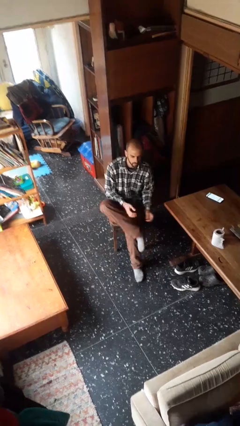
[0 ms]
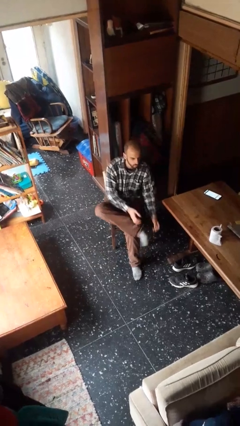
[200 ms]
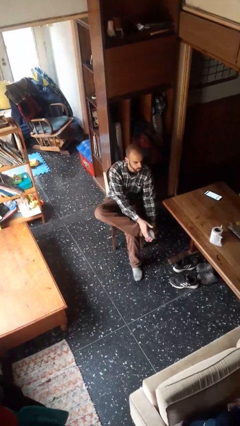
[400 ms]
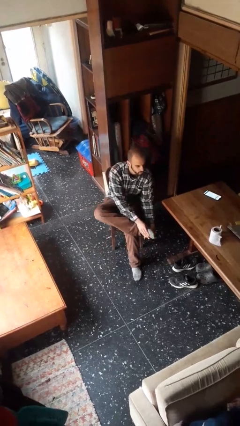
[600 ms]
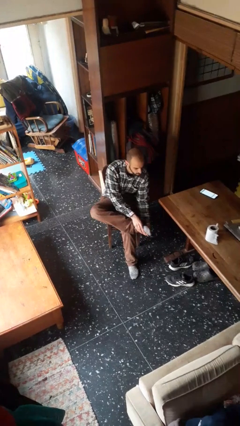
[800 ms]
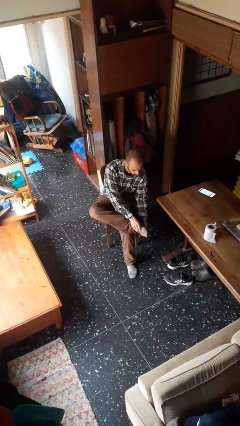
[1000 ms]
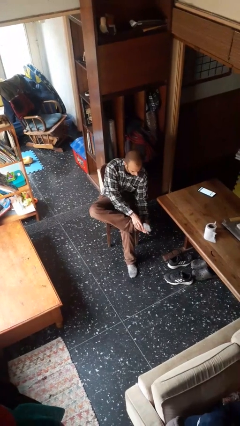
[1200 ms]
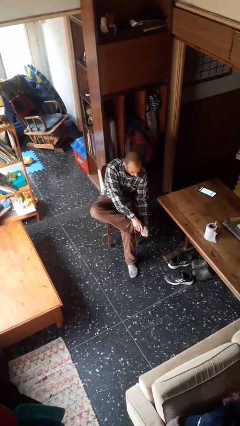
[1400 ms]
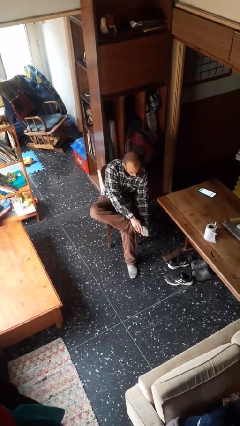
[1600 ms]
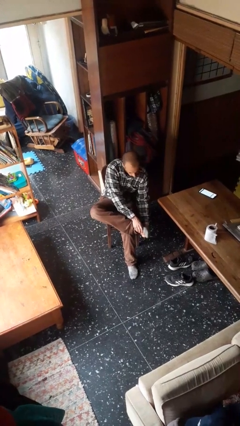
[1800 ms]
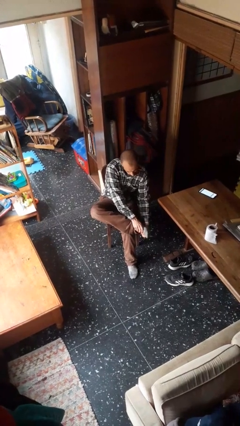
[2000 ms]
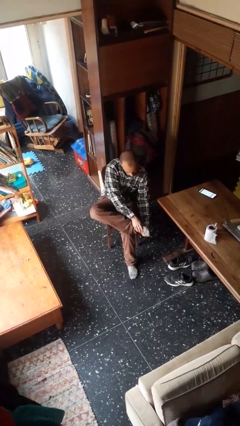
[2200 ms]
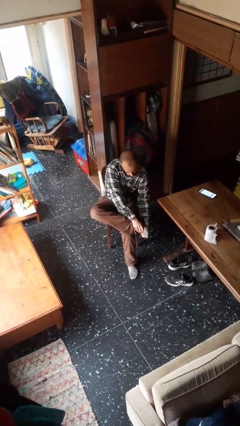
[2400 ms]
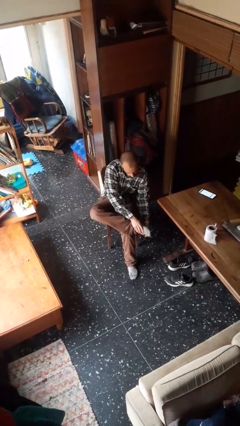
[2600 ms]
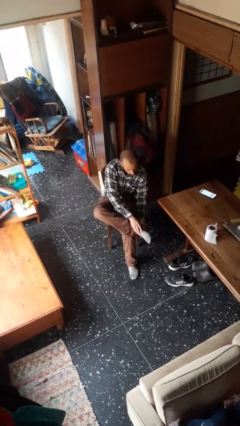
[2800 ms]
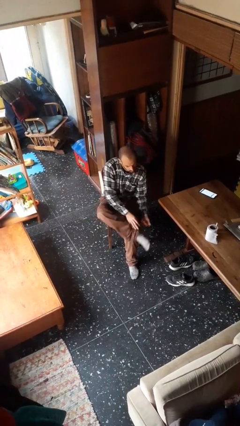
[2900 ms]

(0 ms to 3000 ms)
person rubs foot

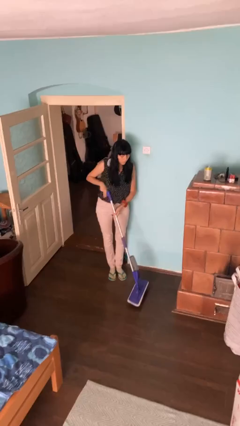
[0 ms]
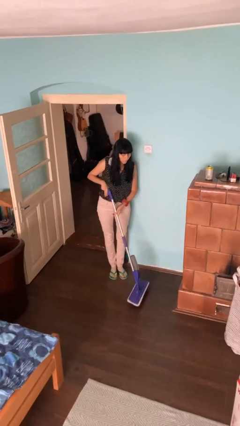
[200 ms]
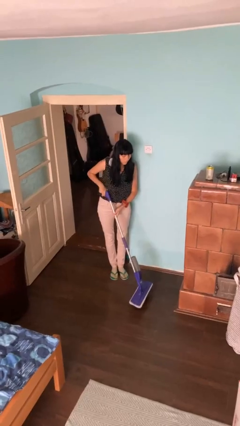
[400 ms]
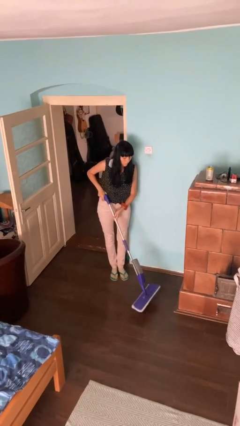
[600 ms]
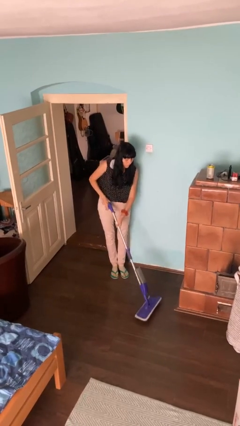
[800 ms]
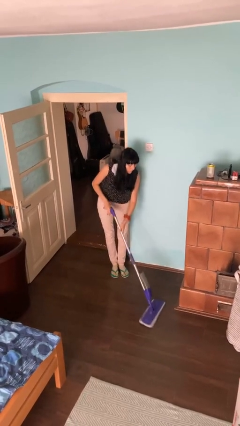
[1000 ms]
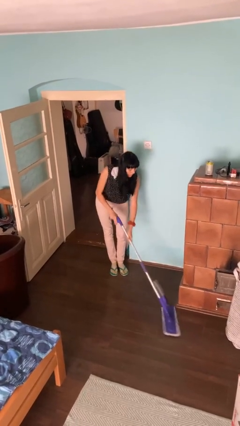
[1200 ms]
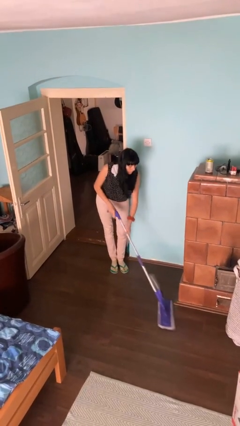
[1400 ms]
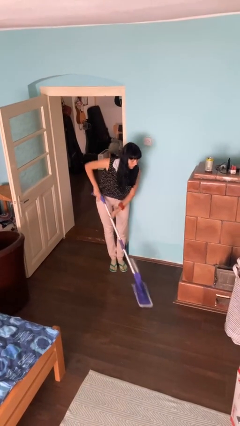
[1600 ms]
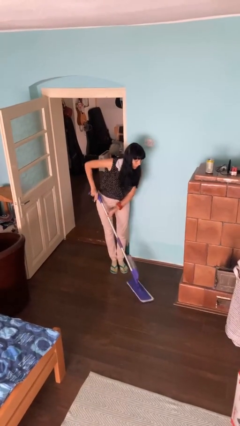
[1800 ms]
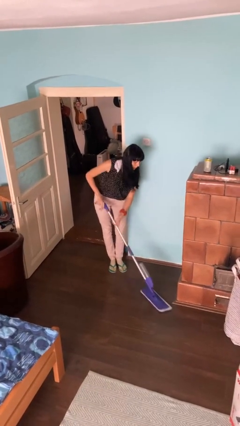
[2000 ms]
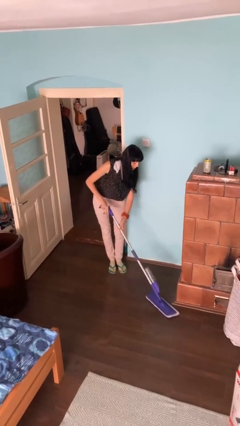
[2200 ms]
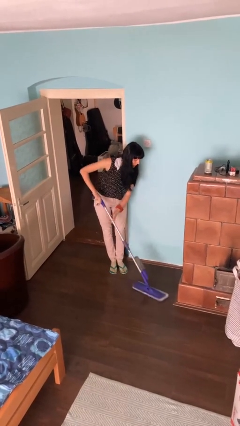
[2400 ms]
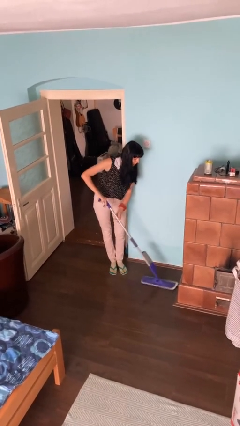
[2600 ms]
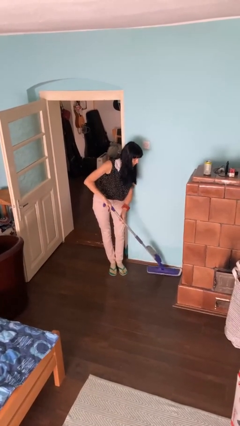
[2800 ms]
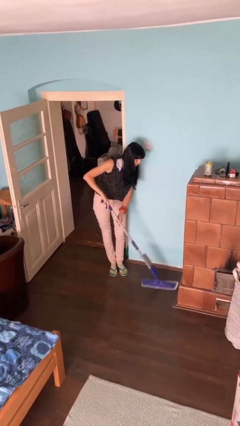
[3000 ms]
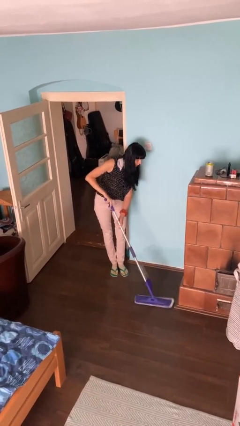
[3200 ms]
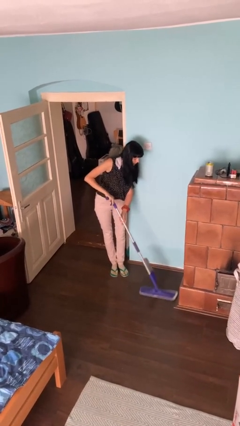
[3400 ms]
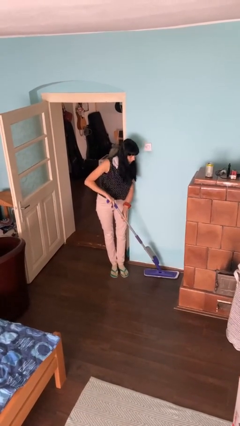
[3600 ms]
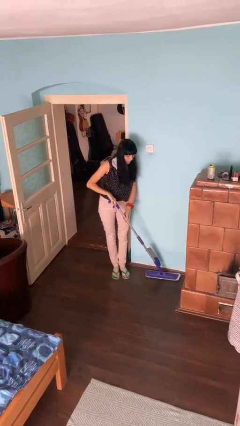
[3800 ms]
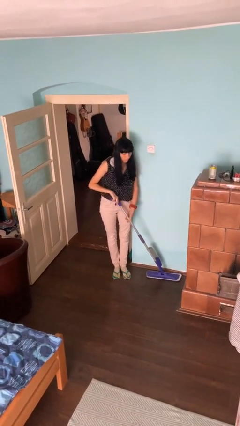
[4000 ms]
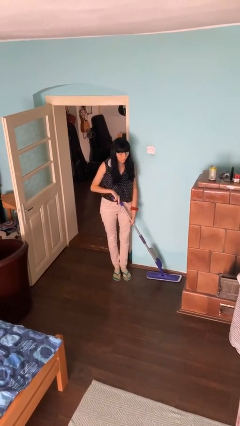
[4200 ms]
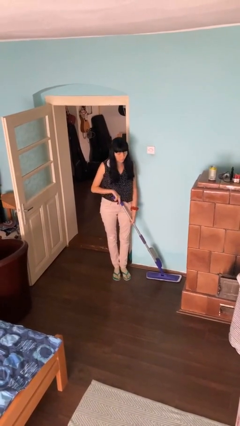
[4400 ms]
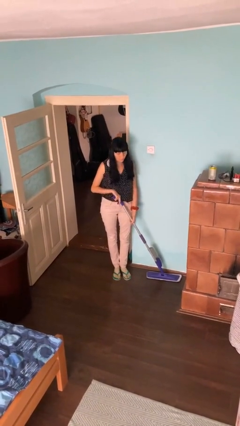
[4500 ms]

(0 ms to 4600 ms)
person mops

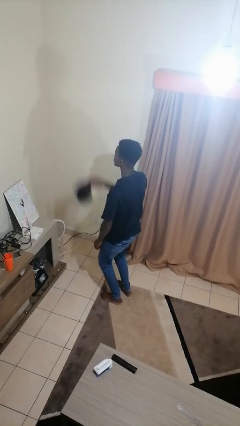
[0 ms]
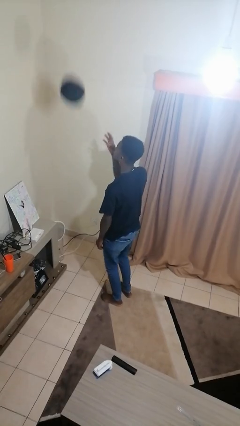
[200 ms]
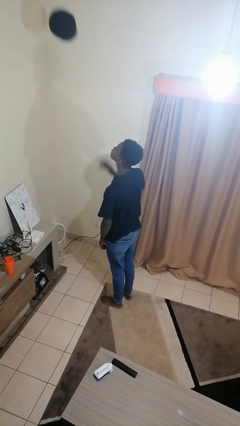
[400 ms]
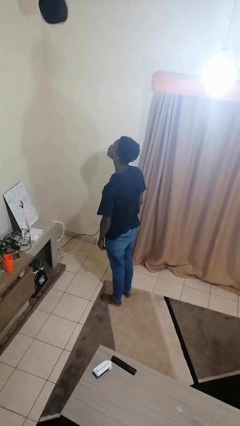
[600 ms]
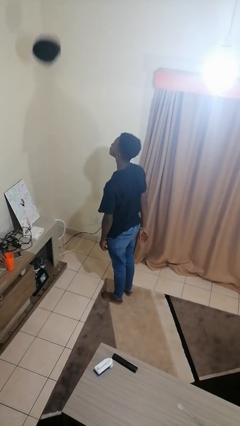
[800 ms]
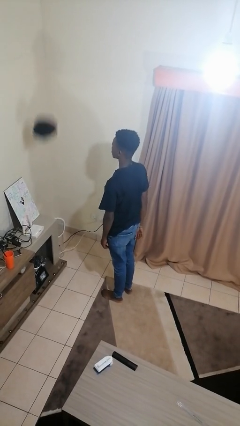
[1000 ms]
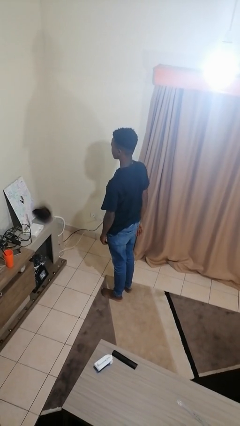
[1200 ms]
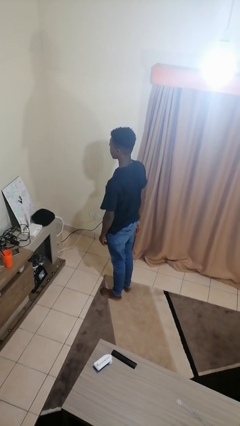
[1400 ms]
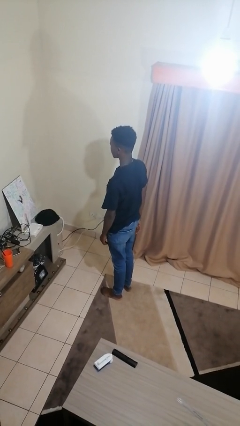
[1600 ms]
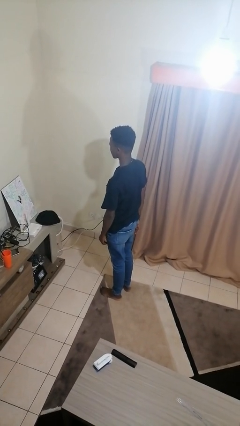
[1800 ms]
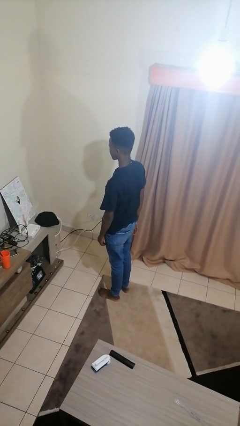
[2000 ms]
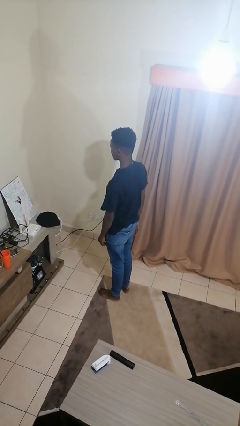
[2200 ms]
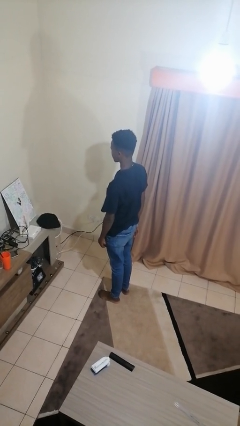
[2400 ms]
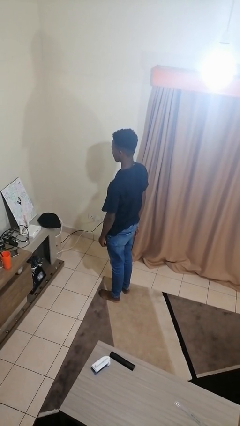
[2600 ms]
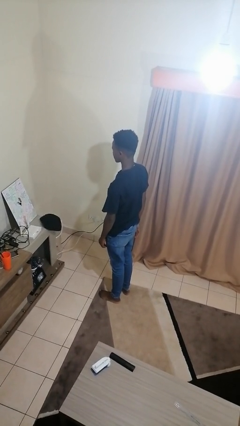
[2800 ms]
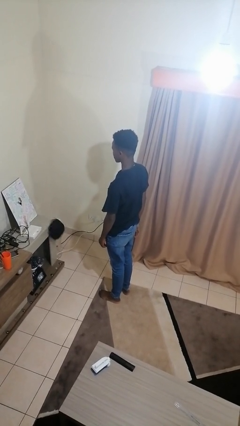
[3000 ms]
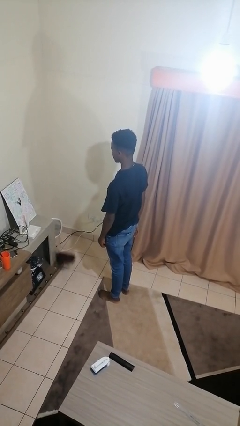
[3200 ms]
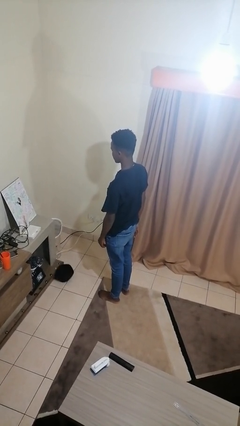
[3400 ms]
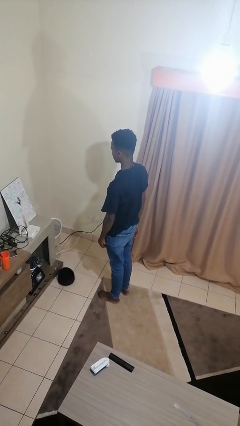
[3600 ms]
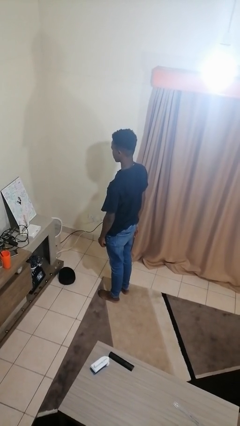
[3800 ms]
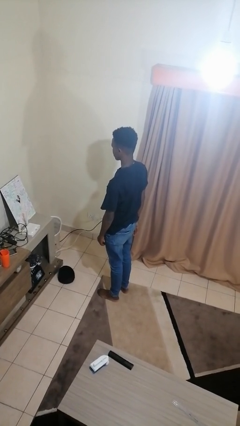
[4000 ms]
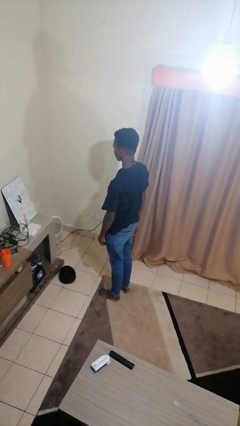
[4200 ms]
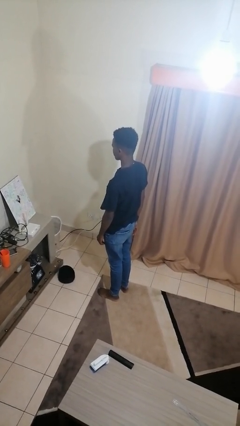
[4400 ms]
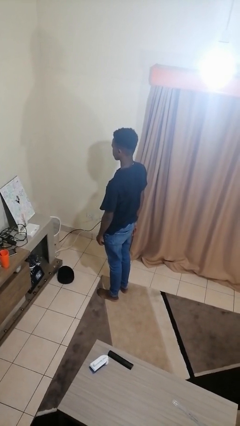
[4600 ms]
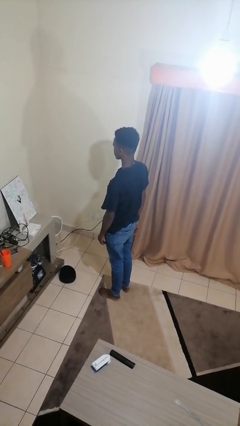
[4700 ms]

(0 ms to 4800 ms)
person throws object into air

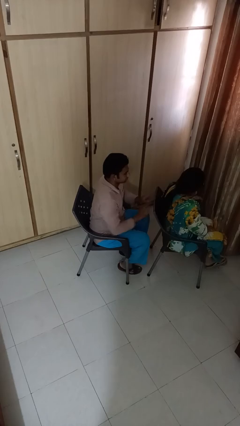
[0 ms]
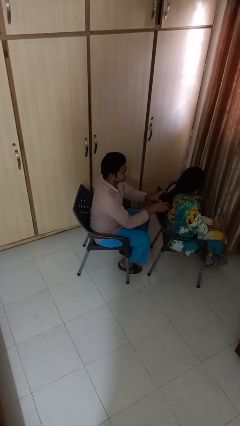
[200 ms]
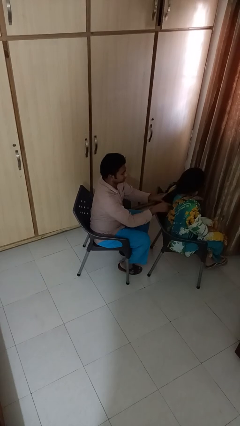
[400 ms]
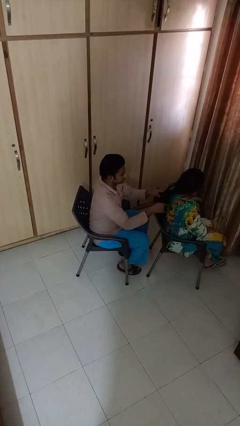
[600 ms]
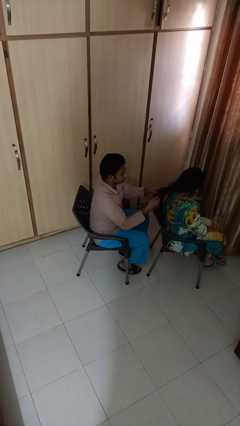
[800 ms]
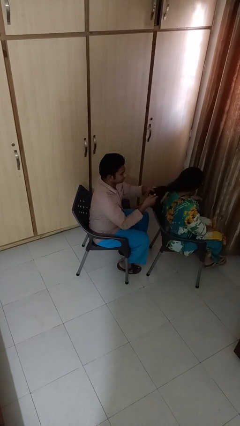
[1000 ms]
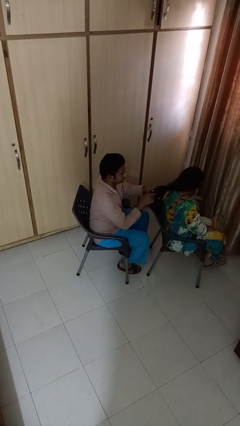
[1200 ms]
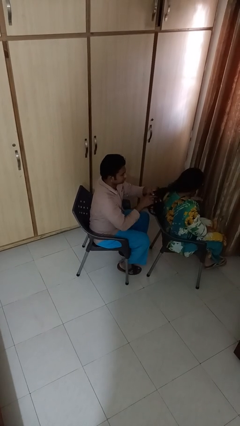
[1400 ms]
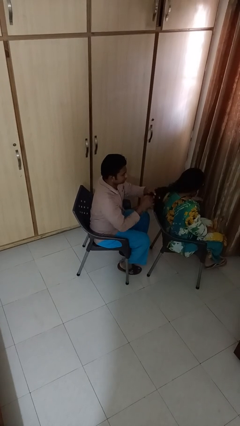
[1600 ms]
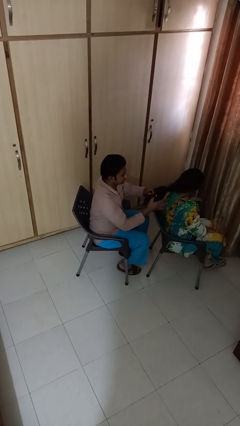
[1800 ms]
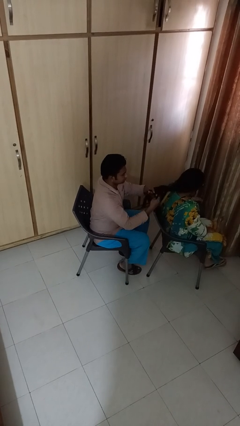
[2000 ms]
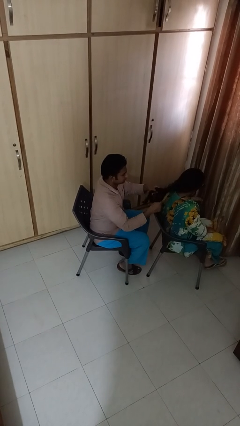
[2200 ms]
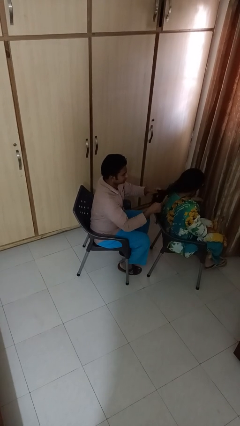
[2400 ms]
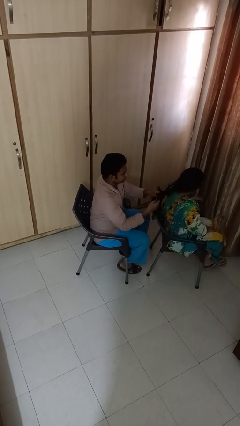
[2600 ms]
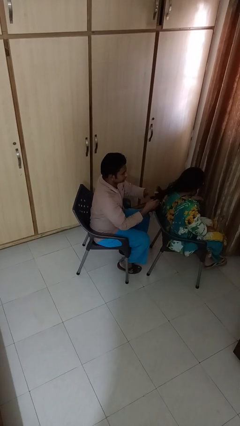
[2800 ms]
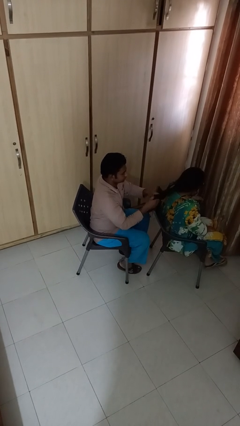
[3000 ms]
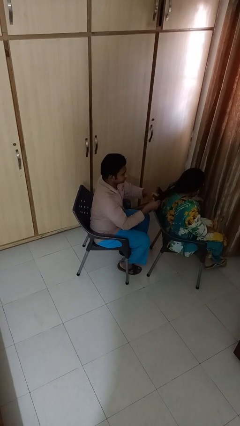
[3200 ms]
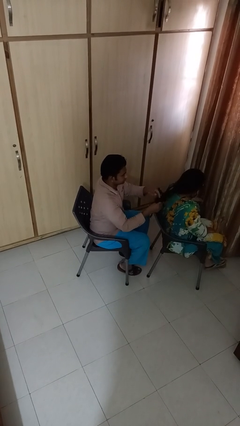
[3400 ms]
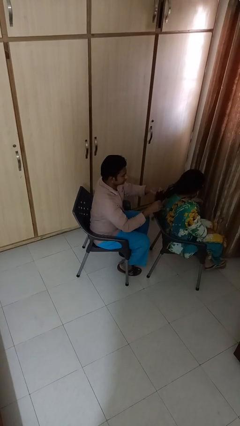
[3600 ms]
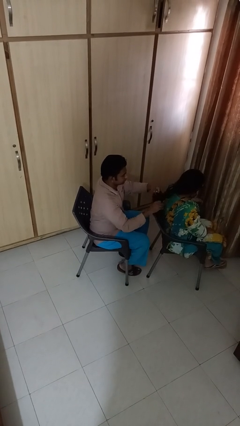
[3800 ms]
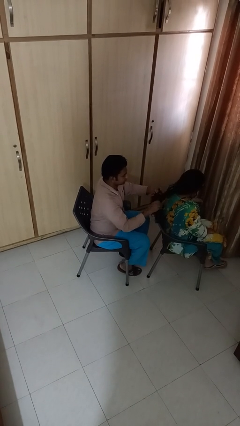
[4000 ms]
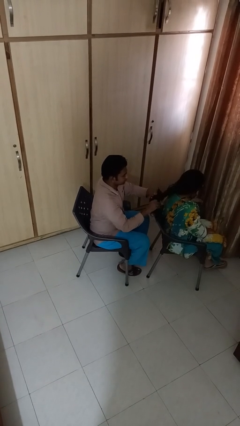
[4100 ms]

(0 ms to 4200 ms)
person braids hair of person

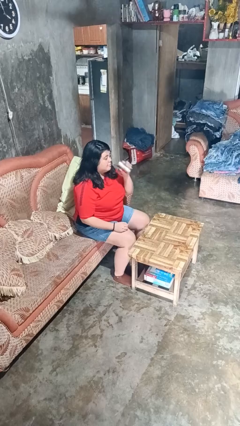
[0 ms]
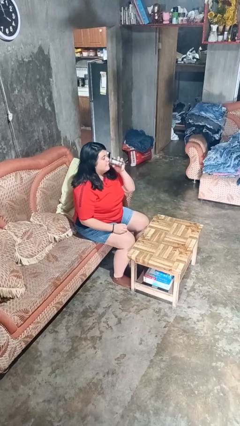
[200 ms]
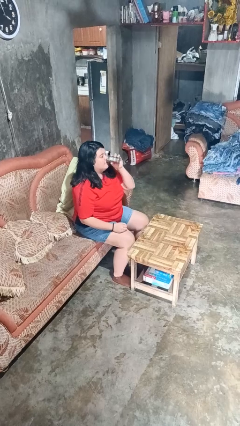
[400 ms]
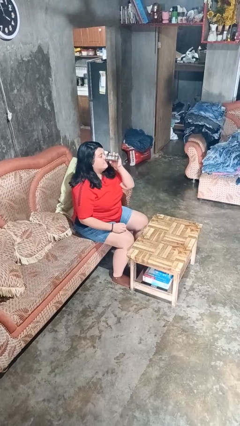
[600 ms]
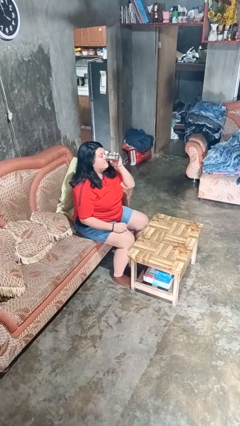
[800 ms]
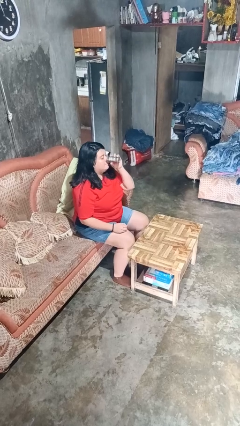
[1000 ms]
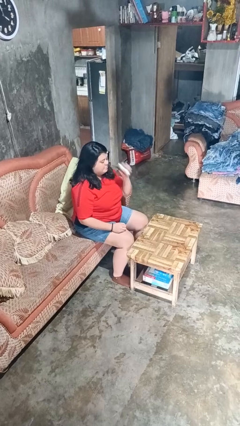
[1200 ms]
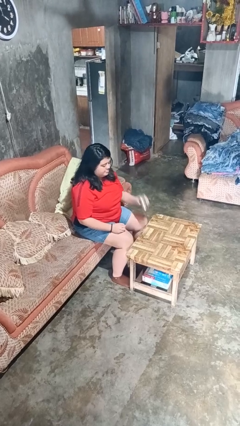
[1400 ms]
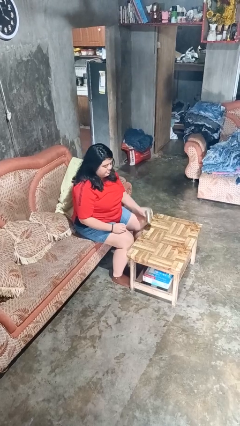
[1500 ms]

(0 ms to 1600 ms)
person drinks from beverage can
